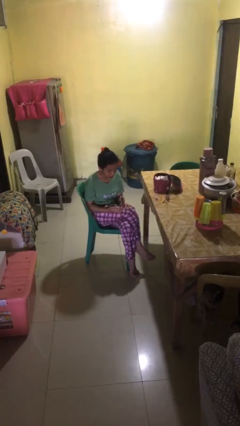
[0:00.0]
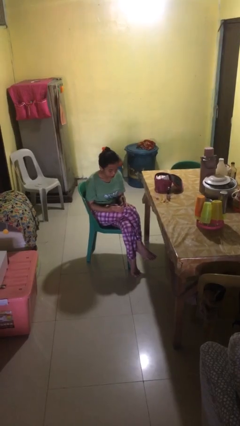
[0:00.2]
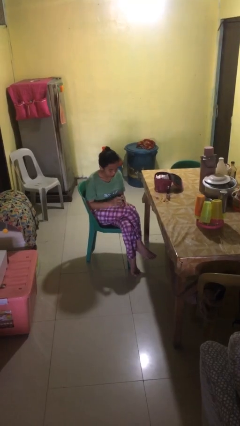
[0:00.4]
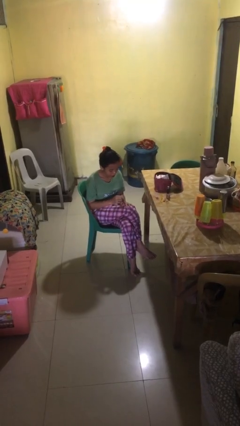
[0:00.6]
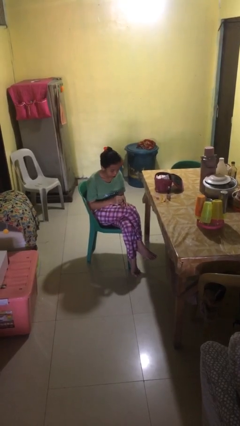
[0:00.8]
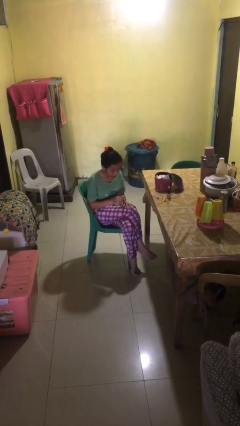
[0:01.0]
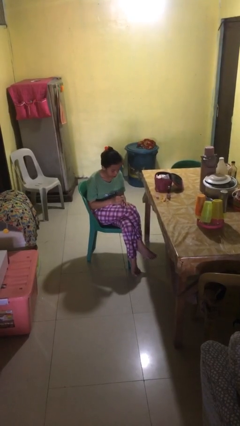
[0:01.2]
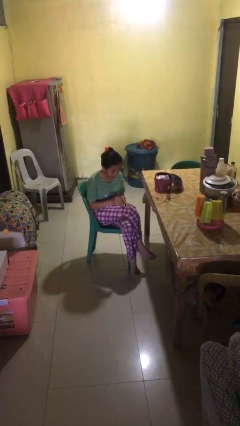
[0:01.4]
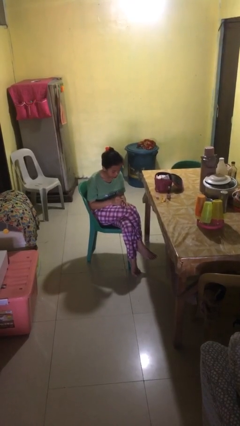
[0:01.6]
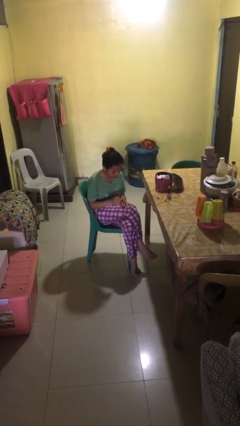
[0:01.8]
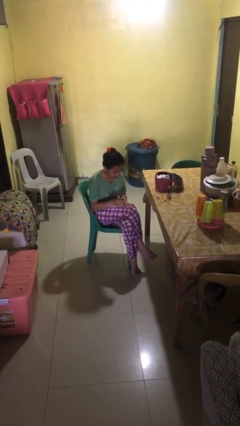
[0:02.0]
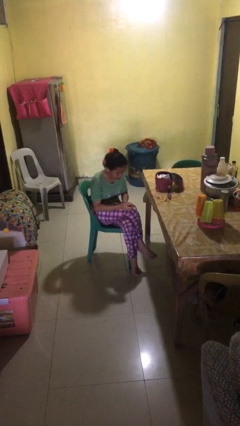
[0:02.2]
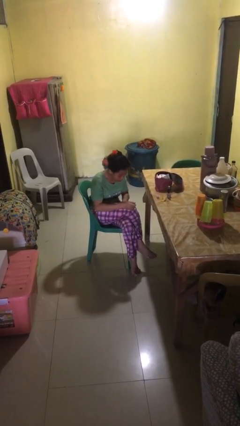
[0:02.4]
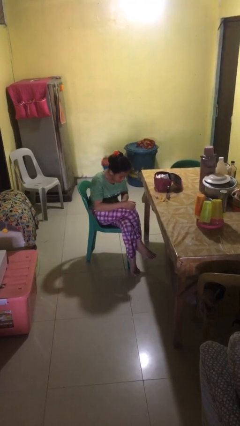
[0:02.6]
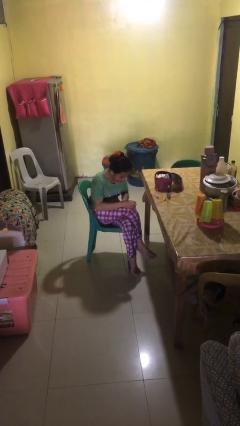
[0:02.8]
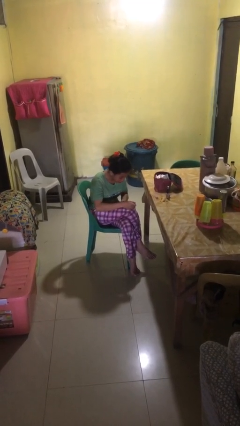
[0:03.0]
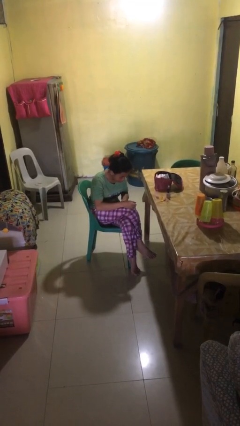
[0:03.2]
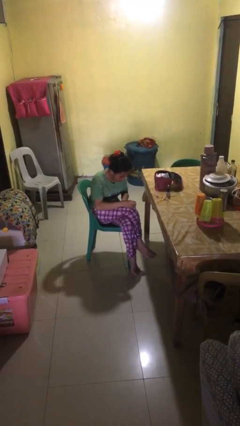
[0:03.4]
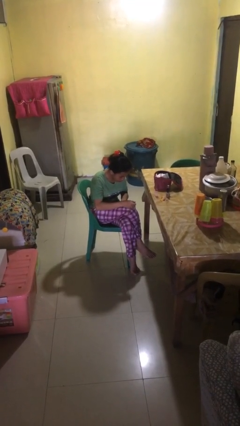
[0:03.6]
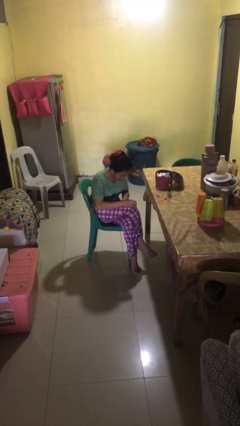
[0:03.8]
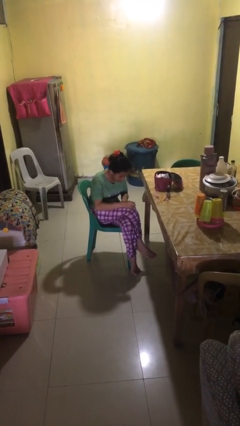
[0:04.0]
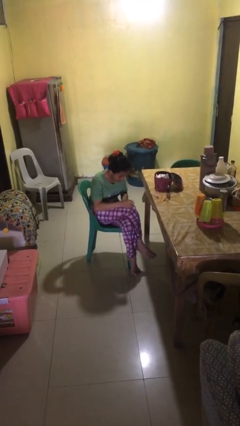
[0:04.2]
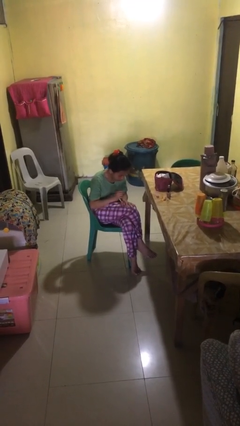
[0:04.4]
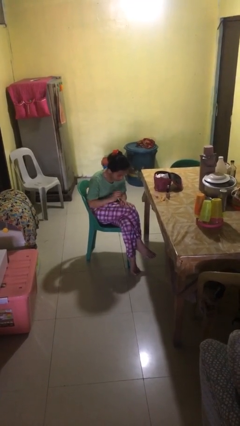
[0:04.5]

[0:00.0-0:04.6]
person paints fingernails

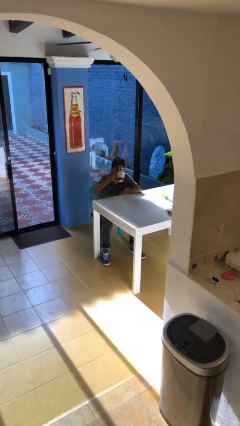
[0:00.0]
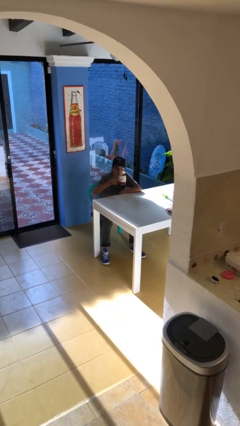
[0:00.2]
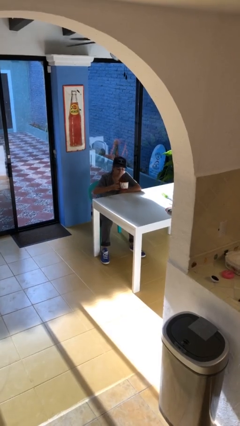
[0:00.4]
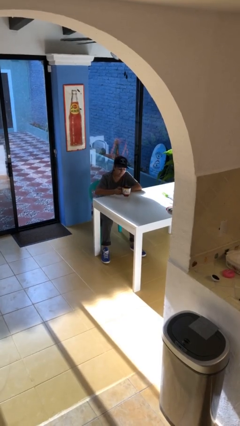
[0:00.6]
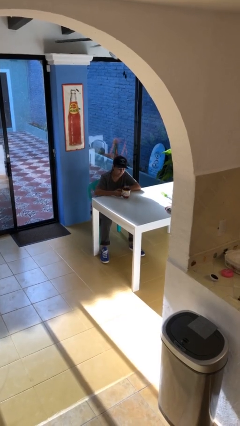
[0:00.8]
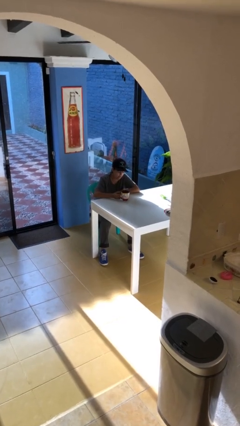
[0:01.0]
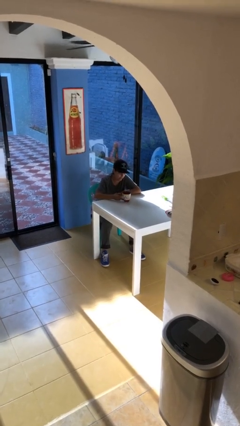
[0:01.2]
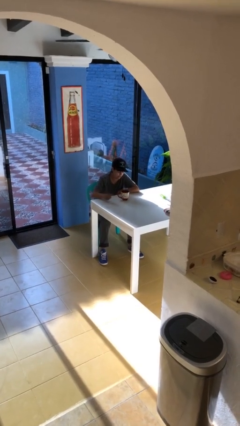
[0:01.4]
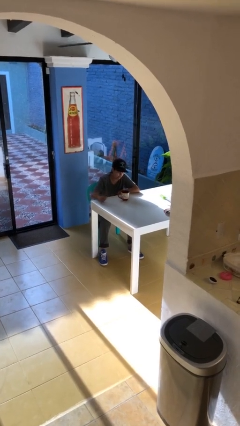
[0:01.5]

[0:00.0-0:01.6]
person puts down object on table

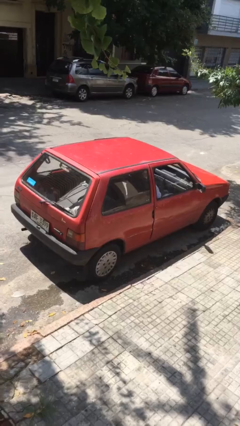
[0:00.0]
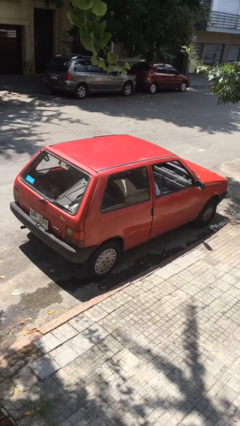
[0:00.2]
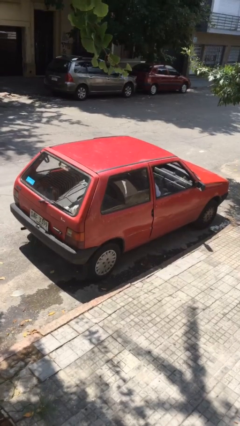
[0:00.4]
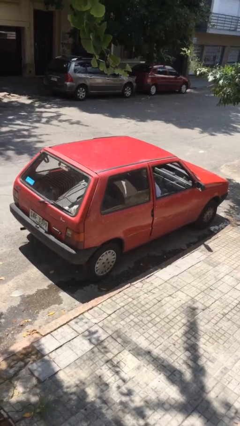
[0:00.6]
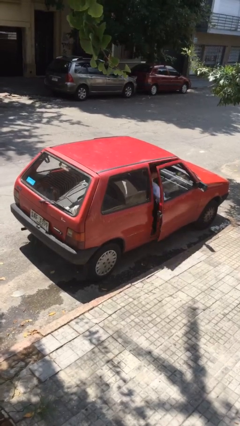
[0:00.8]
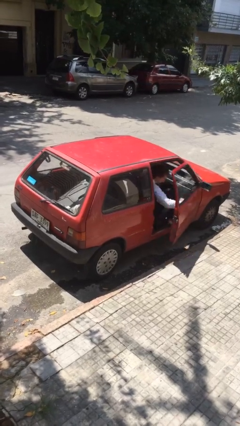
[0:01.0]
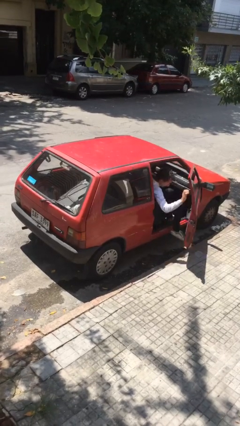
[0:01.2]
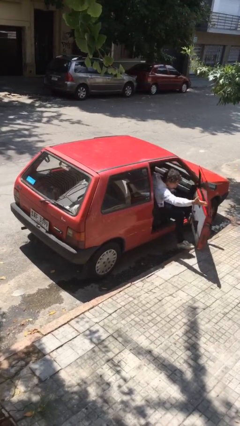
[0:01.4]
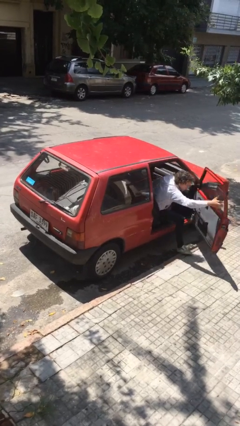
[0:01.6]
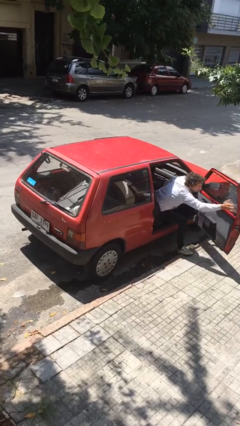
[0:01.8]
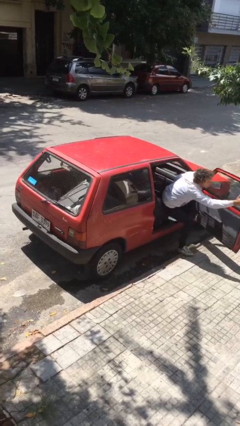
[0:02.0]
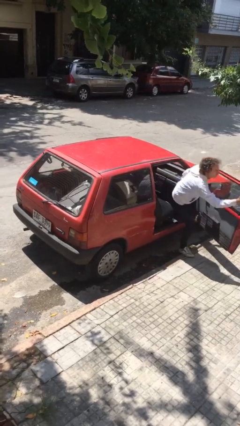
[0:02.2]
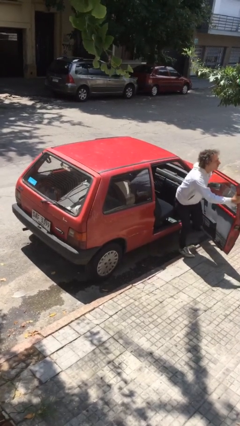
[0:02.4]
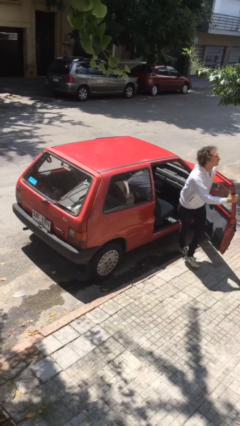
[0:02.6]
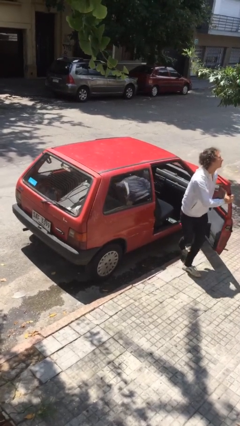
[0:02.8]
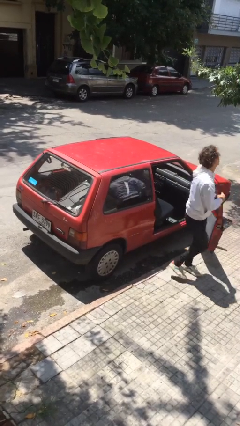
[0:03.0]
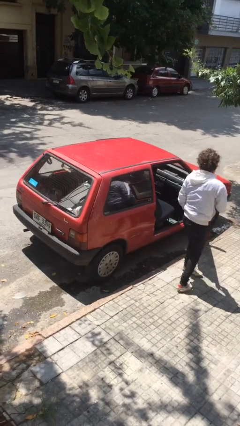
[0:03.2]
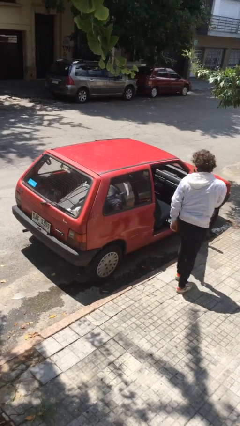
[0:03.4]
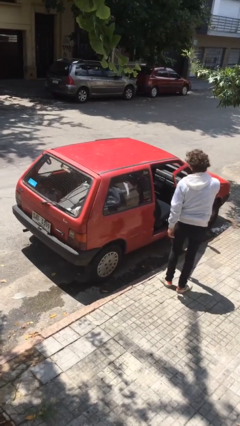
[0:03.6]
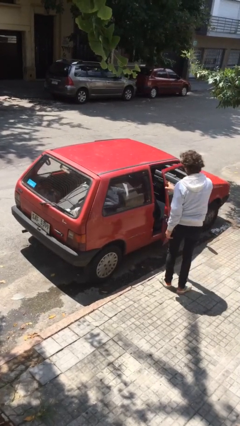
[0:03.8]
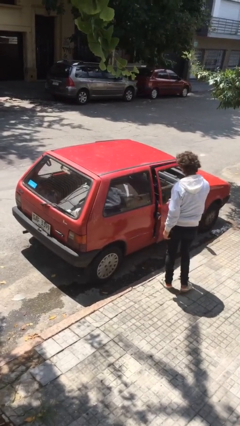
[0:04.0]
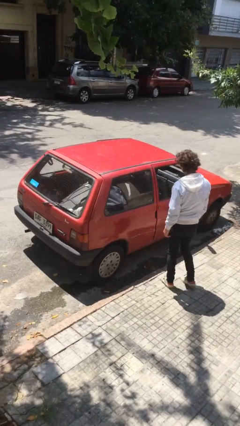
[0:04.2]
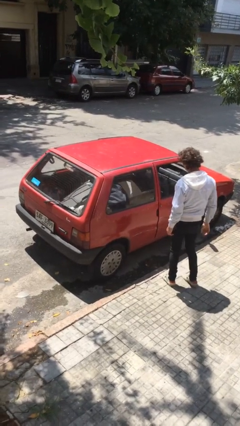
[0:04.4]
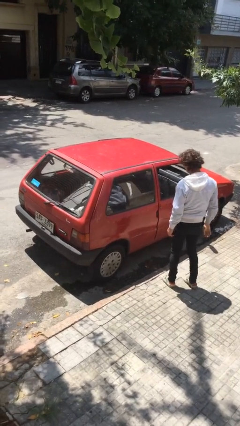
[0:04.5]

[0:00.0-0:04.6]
car drops off person

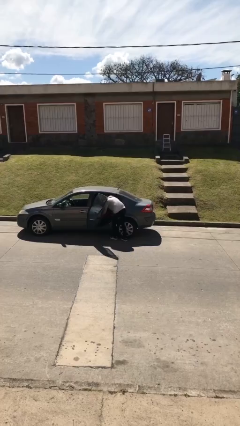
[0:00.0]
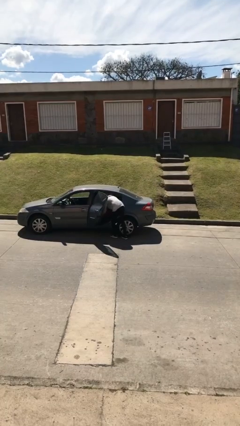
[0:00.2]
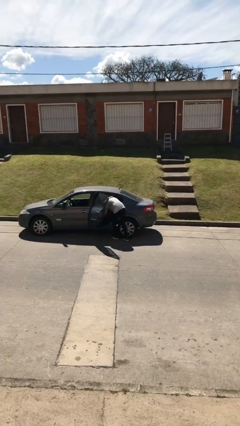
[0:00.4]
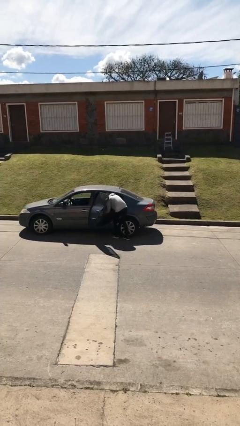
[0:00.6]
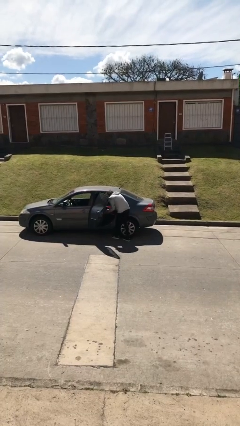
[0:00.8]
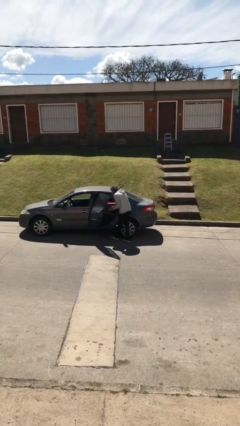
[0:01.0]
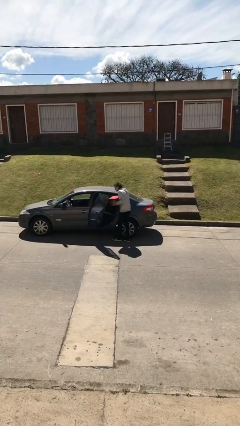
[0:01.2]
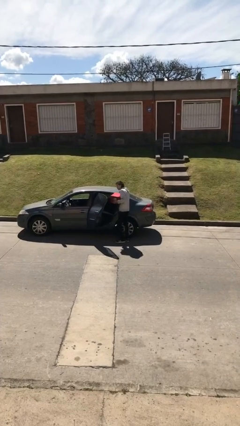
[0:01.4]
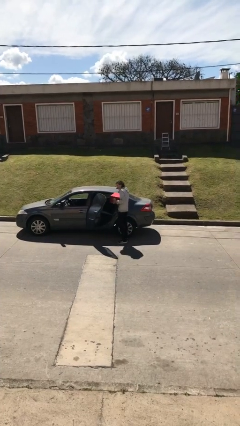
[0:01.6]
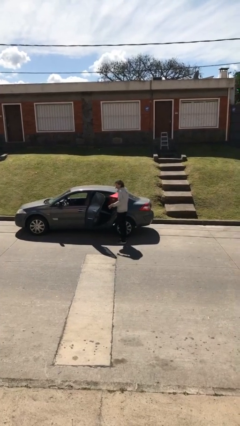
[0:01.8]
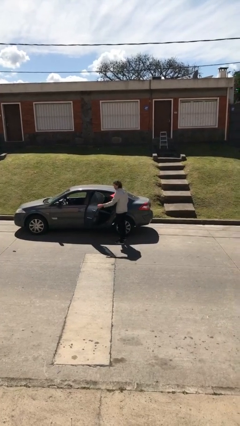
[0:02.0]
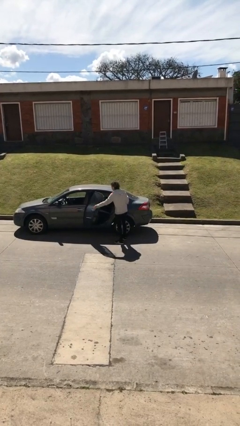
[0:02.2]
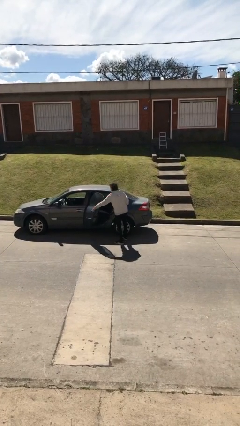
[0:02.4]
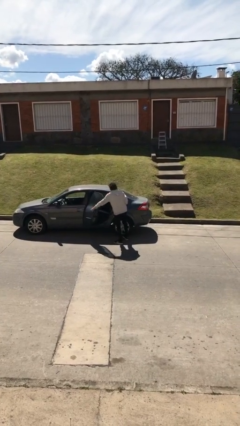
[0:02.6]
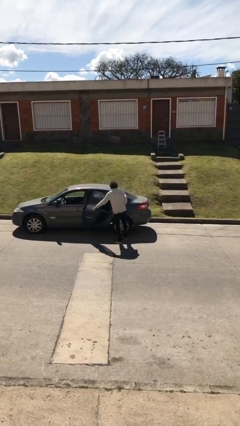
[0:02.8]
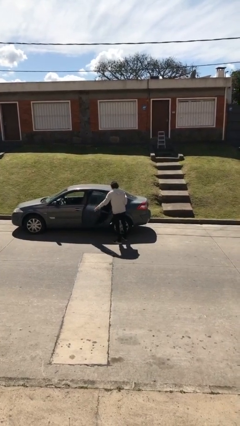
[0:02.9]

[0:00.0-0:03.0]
person unloads car

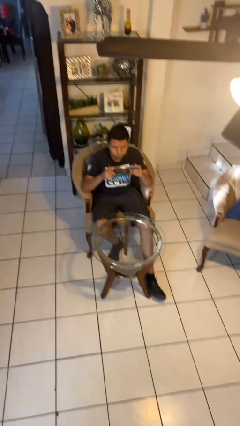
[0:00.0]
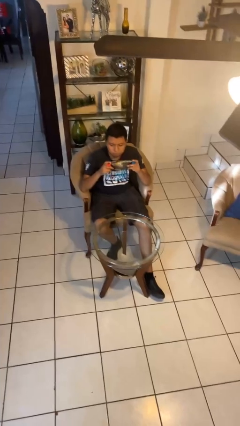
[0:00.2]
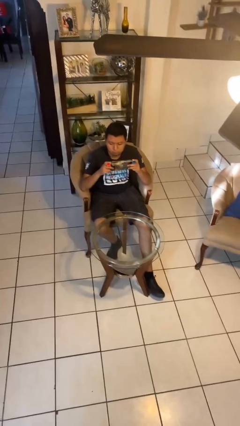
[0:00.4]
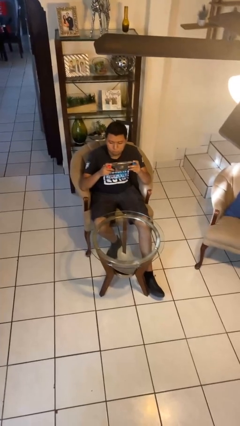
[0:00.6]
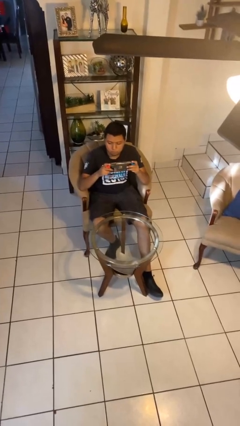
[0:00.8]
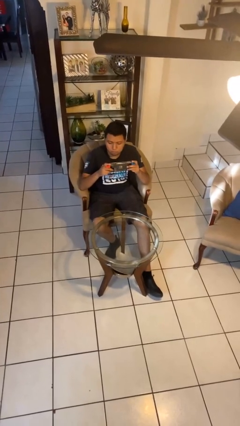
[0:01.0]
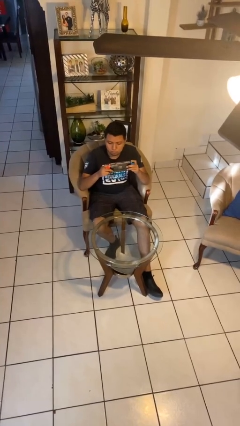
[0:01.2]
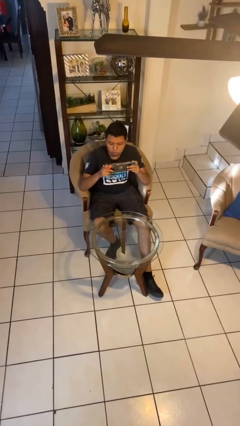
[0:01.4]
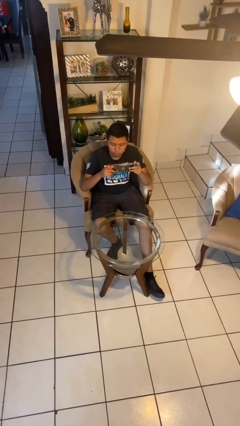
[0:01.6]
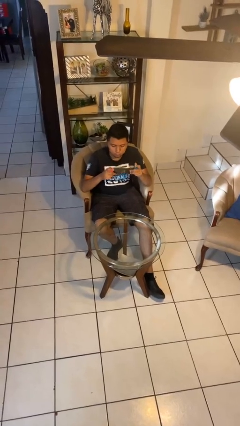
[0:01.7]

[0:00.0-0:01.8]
person interacts with handheld game

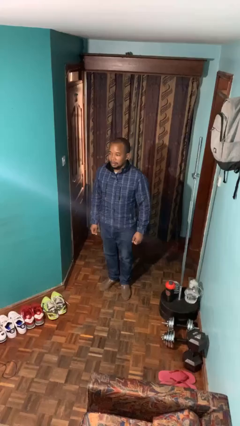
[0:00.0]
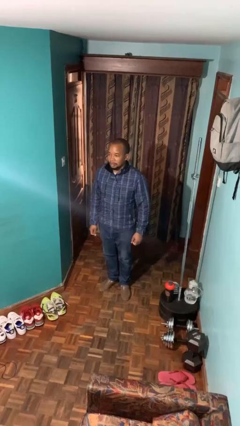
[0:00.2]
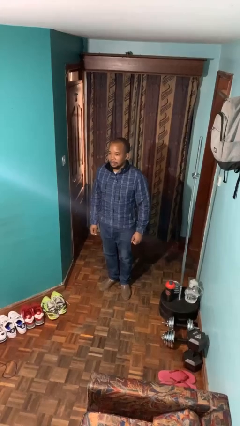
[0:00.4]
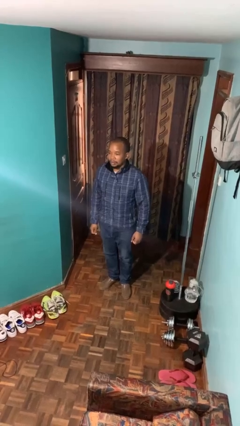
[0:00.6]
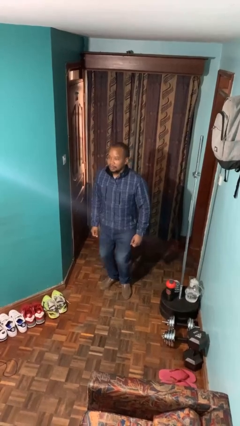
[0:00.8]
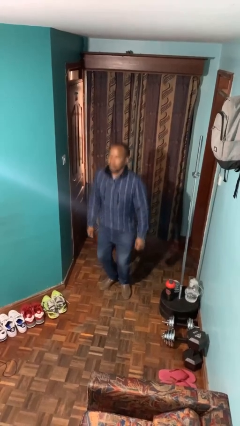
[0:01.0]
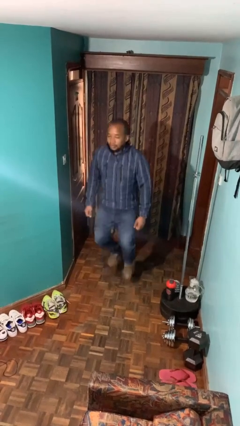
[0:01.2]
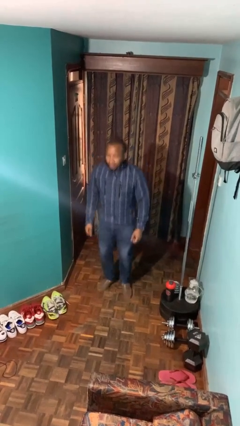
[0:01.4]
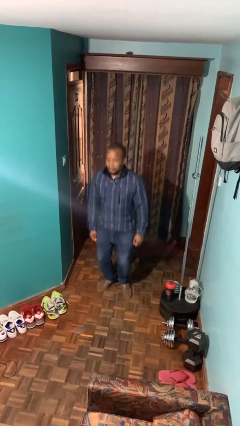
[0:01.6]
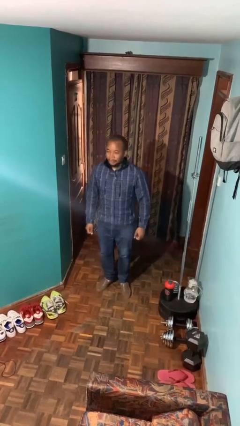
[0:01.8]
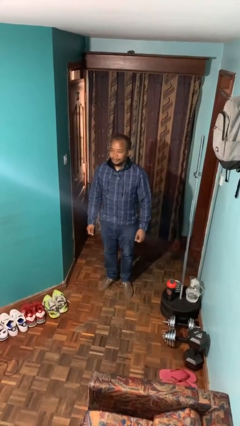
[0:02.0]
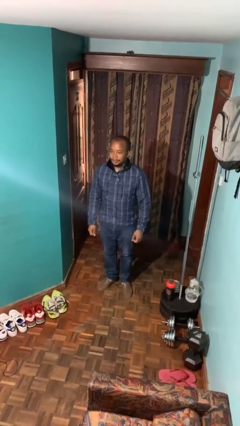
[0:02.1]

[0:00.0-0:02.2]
person jumps
